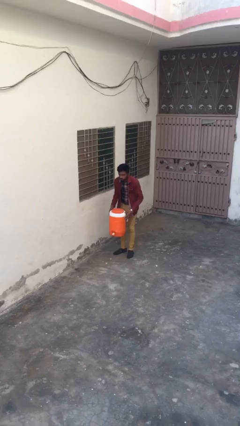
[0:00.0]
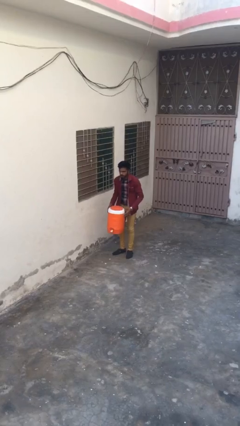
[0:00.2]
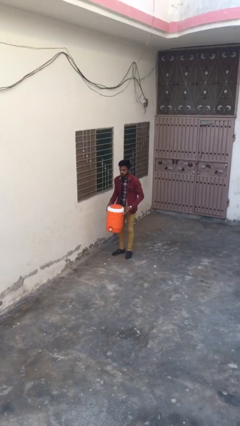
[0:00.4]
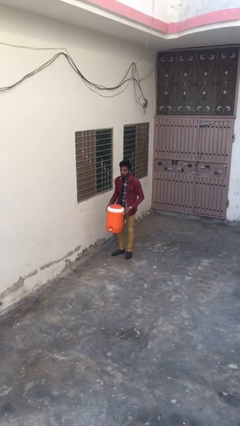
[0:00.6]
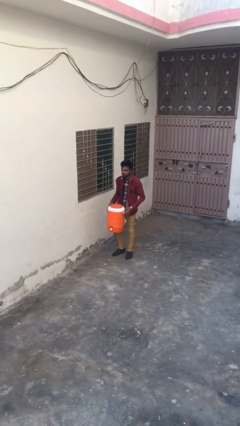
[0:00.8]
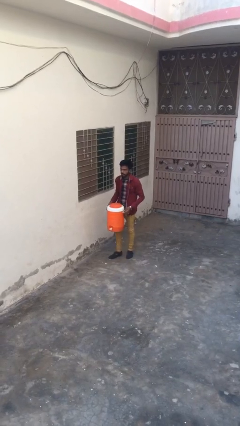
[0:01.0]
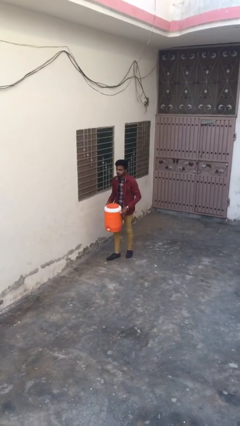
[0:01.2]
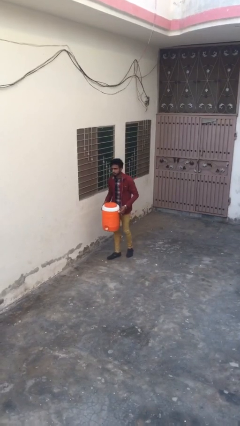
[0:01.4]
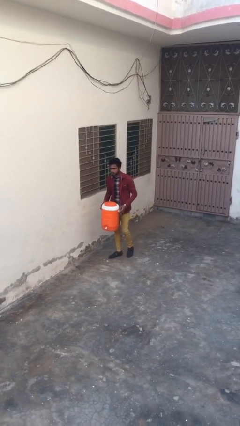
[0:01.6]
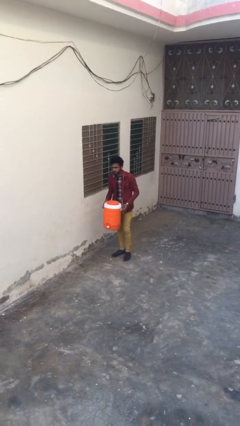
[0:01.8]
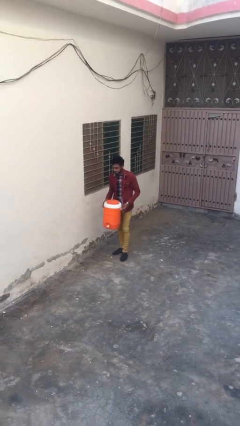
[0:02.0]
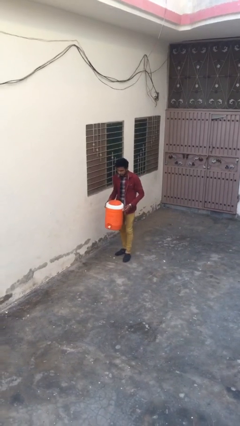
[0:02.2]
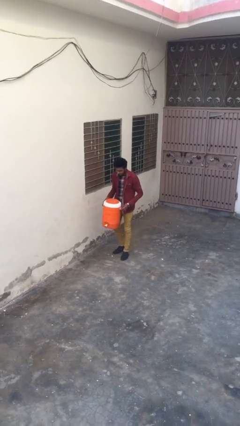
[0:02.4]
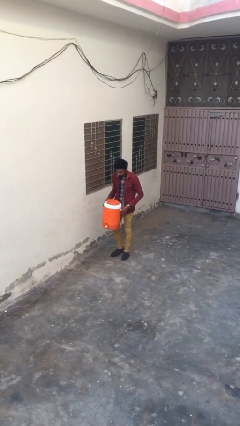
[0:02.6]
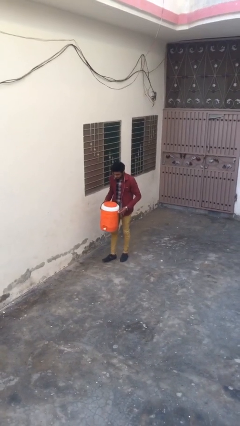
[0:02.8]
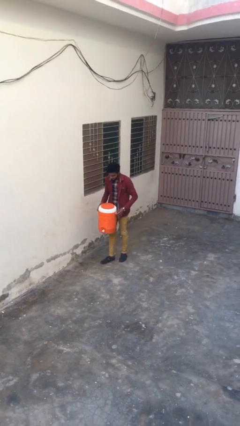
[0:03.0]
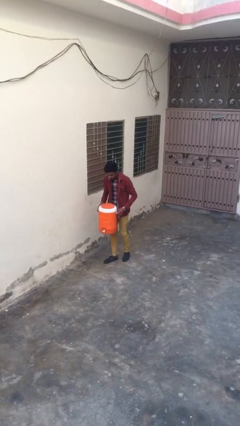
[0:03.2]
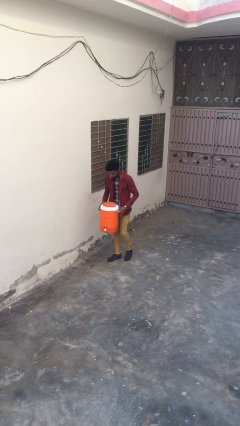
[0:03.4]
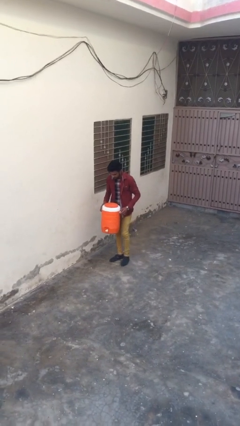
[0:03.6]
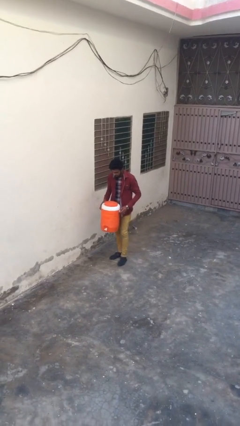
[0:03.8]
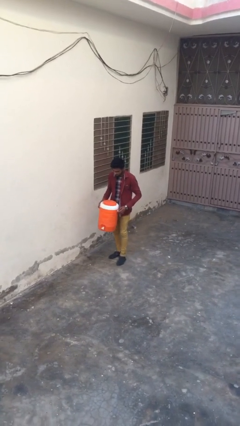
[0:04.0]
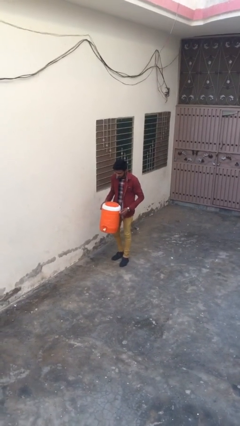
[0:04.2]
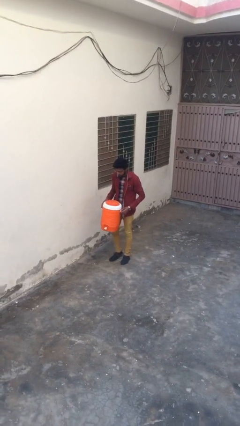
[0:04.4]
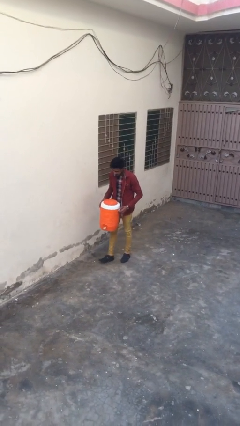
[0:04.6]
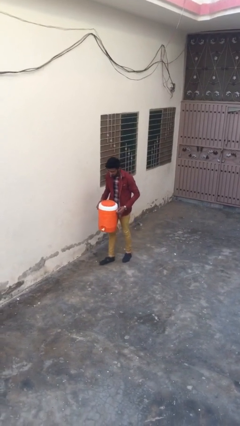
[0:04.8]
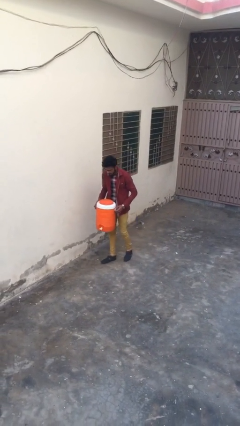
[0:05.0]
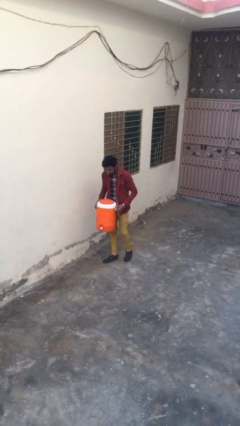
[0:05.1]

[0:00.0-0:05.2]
person carries heavy object

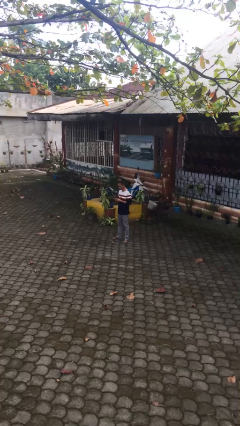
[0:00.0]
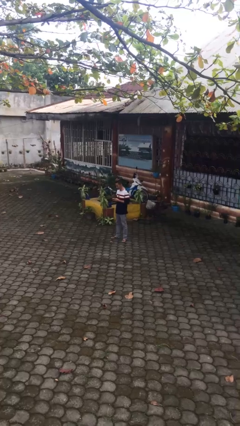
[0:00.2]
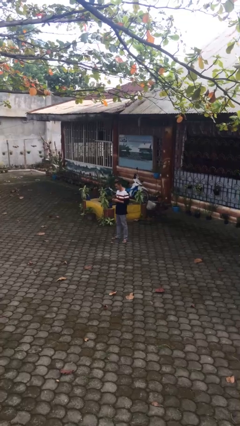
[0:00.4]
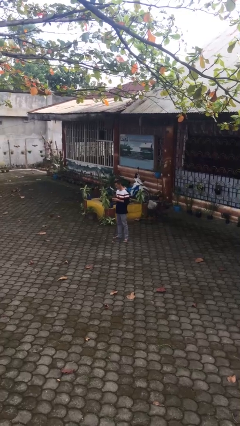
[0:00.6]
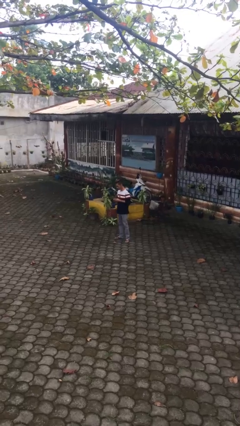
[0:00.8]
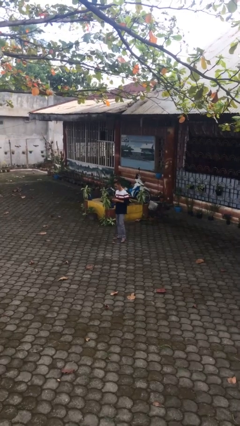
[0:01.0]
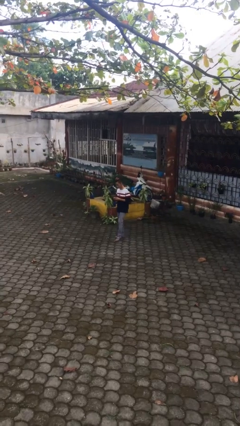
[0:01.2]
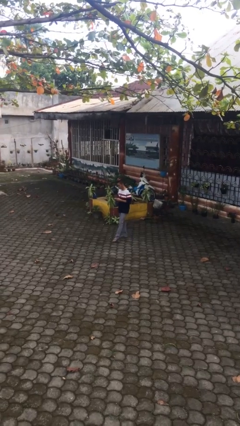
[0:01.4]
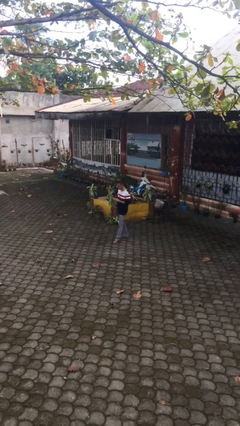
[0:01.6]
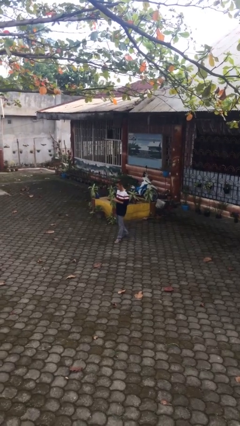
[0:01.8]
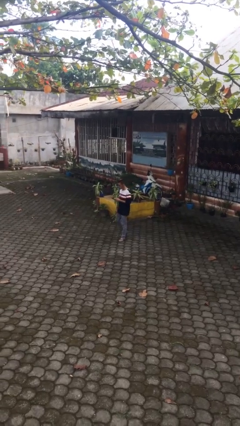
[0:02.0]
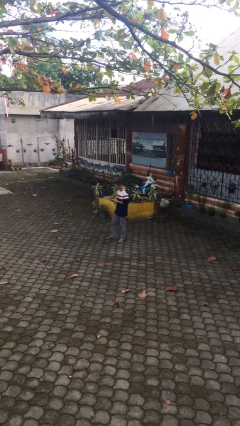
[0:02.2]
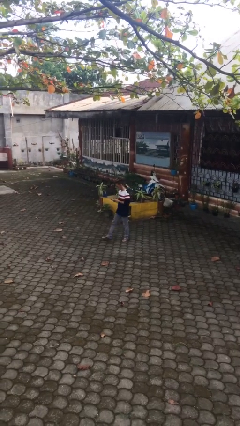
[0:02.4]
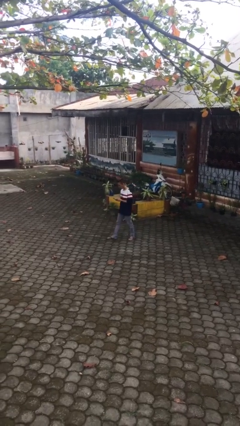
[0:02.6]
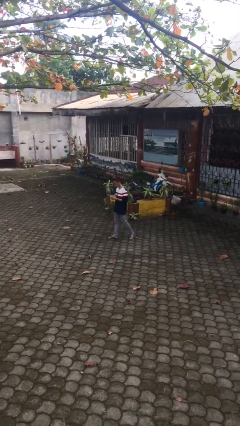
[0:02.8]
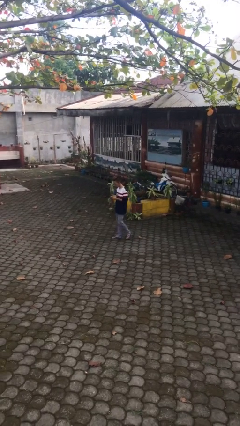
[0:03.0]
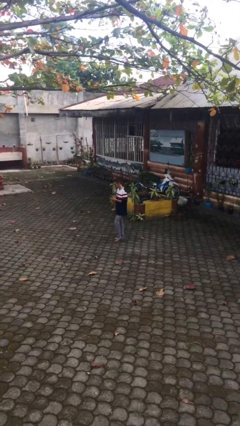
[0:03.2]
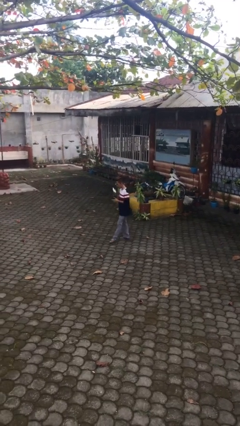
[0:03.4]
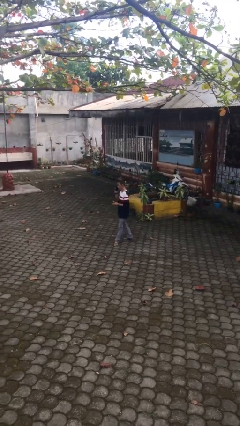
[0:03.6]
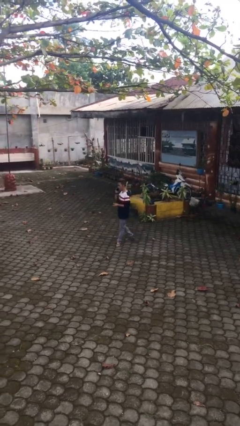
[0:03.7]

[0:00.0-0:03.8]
person texts on phone

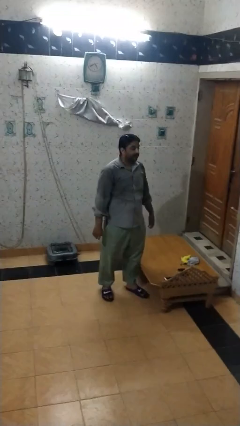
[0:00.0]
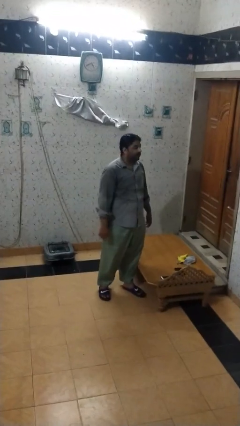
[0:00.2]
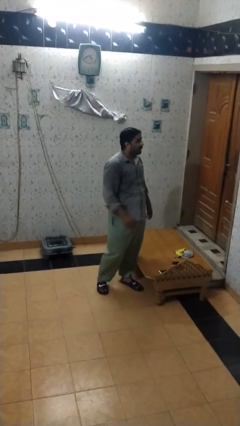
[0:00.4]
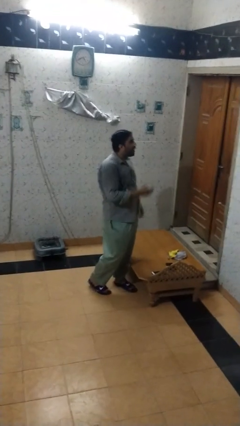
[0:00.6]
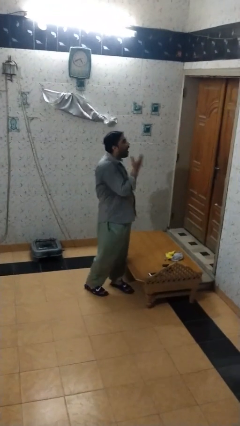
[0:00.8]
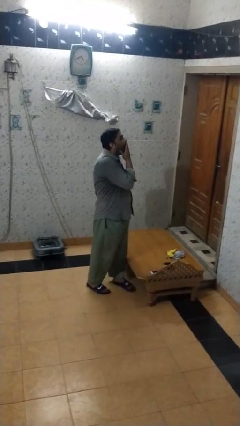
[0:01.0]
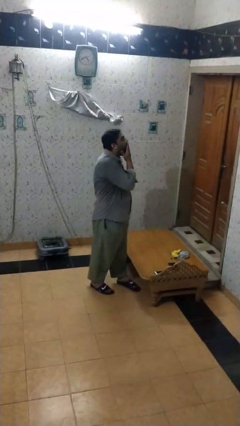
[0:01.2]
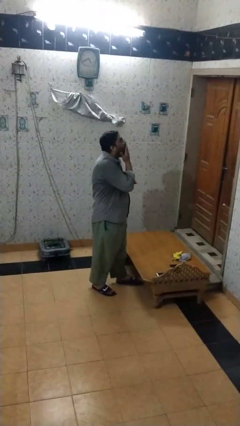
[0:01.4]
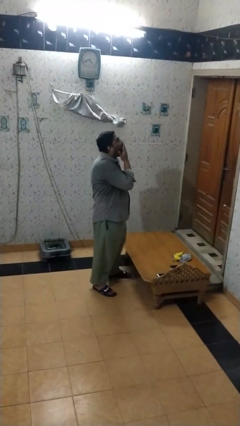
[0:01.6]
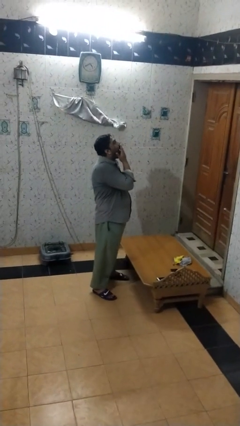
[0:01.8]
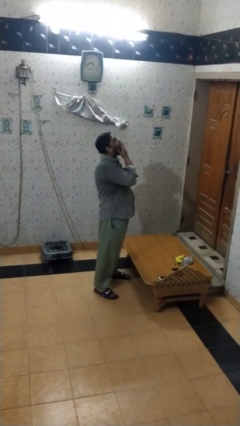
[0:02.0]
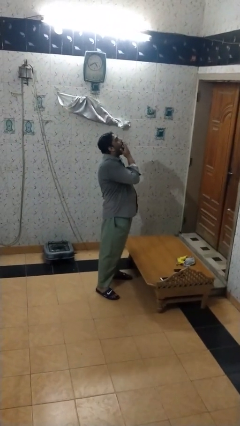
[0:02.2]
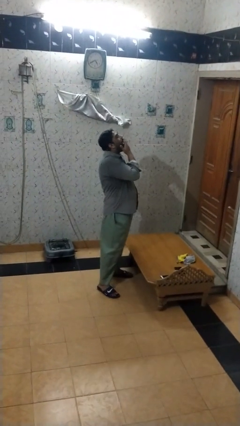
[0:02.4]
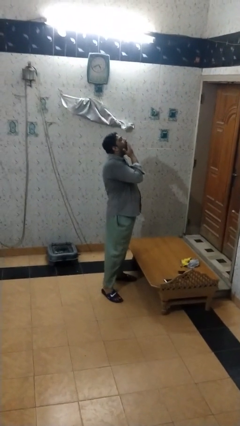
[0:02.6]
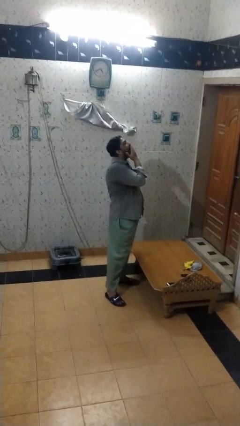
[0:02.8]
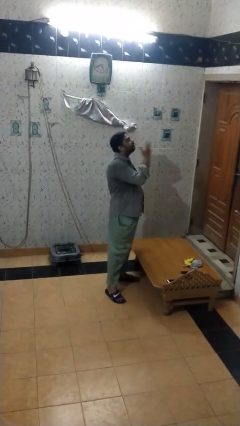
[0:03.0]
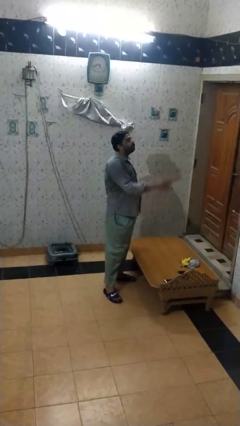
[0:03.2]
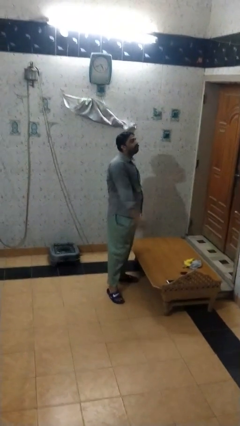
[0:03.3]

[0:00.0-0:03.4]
person yawns

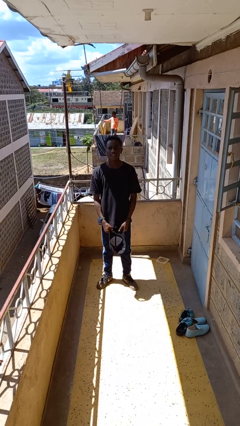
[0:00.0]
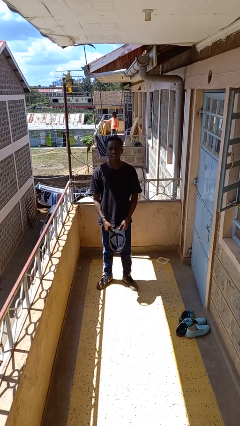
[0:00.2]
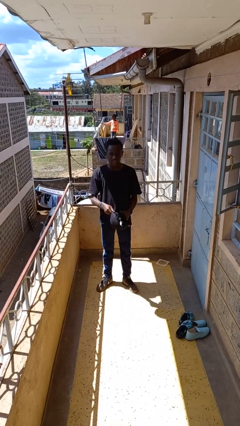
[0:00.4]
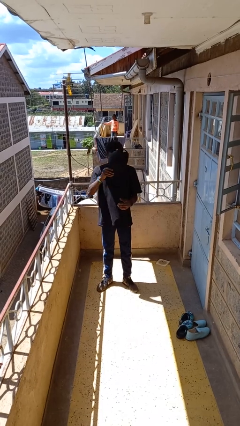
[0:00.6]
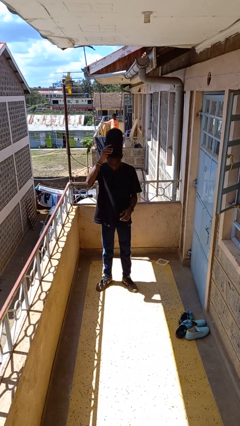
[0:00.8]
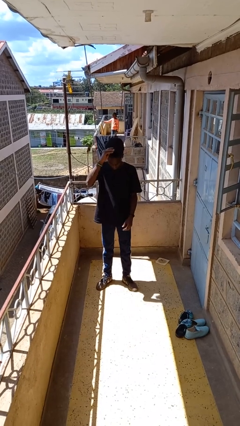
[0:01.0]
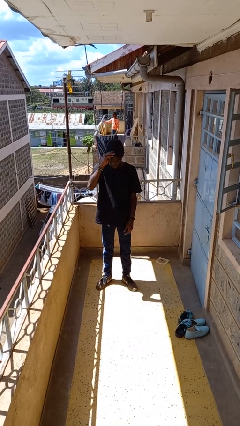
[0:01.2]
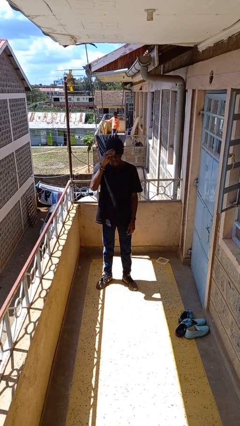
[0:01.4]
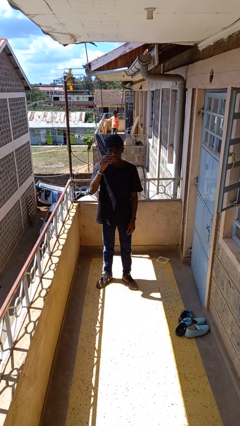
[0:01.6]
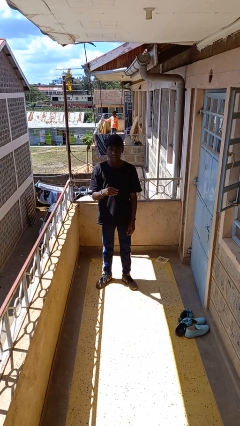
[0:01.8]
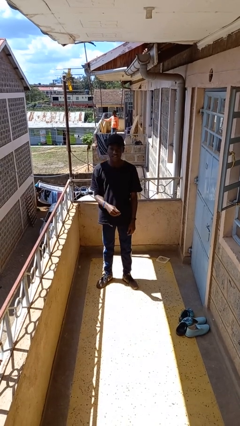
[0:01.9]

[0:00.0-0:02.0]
person puts on hat

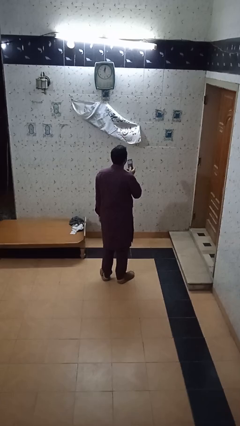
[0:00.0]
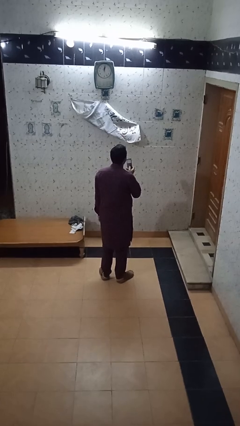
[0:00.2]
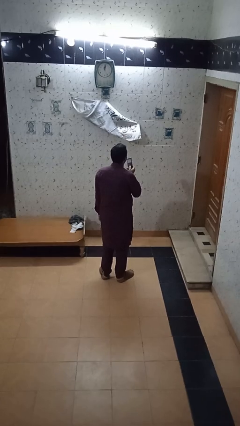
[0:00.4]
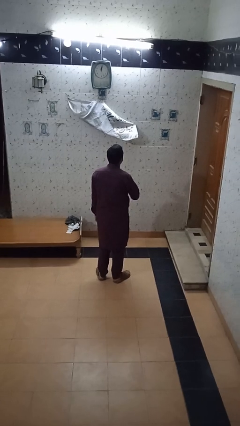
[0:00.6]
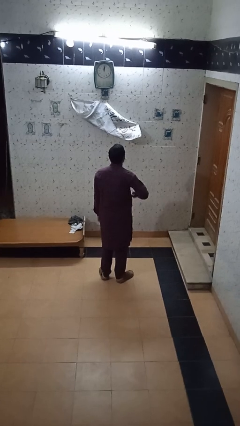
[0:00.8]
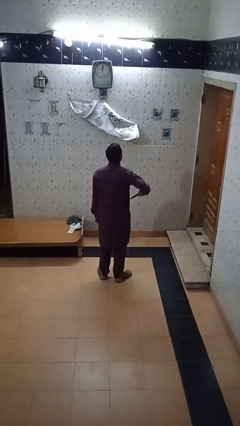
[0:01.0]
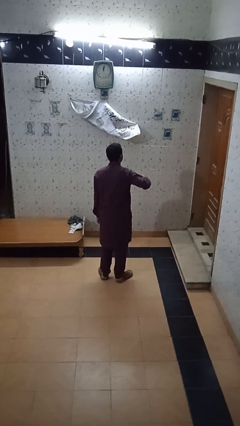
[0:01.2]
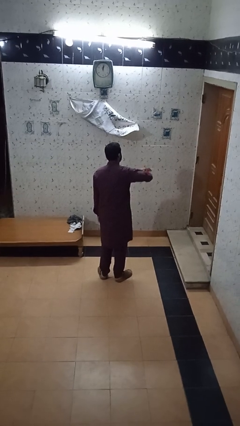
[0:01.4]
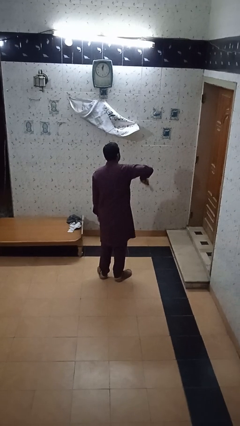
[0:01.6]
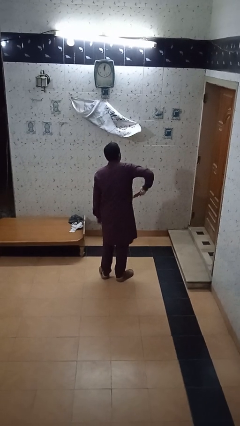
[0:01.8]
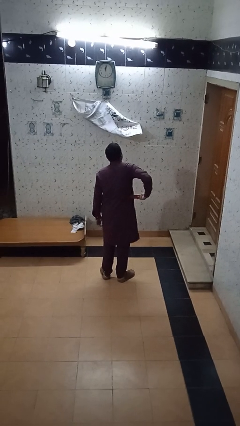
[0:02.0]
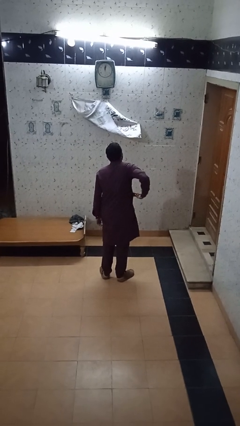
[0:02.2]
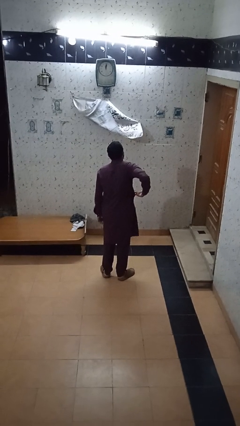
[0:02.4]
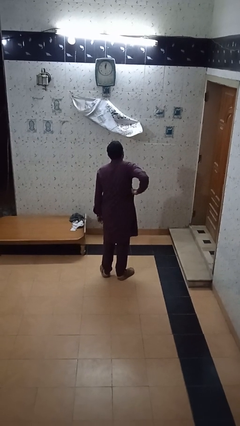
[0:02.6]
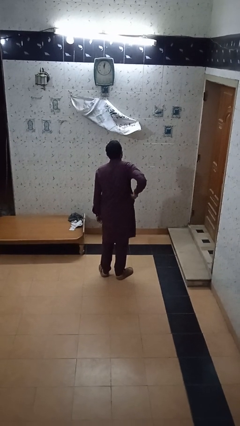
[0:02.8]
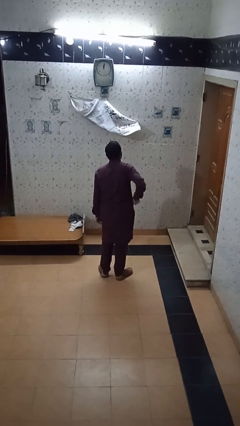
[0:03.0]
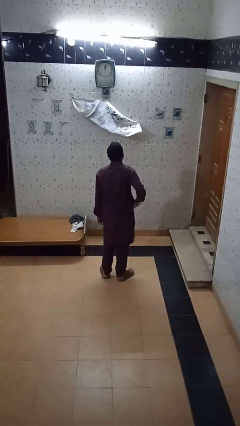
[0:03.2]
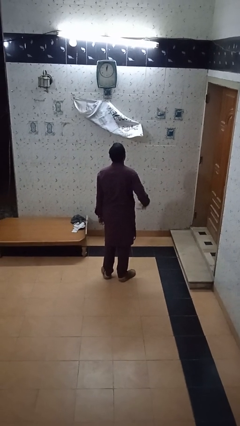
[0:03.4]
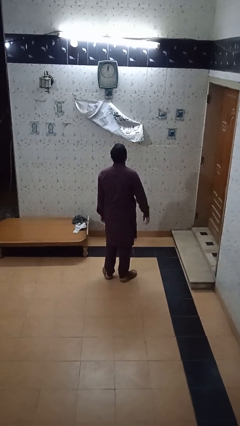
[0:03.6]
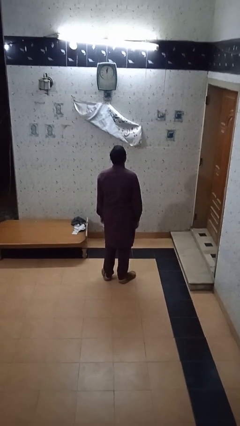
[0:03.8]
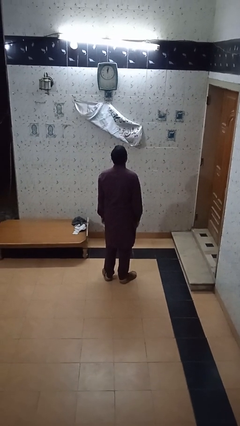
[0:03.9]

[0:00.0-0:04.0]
person puts phone into pocket
